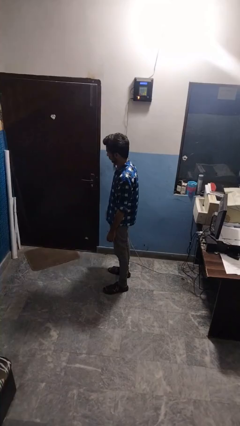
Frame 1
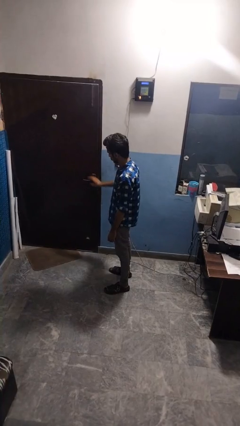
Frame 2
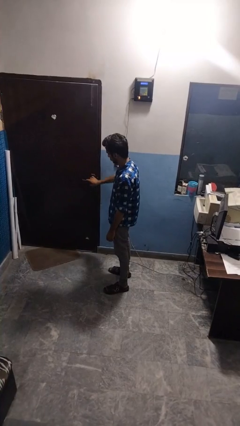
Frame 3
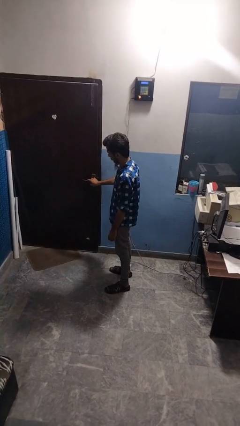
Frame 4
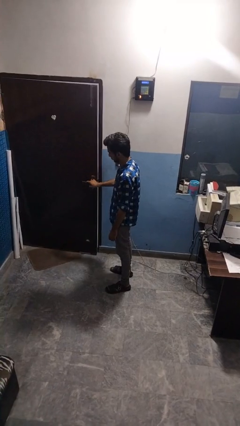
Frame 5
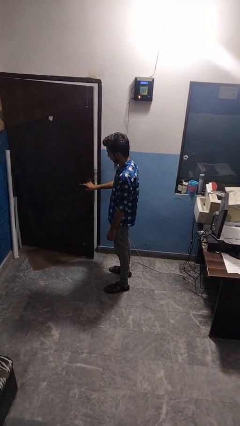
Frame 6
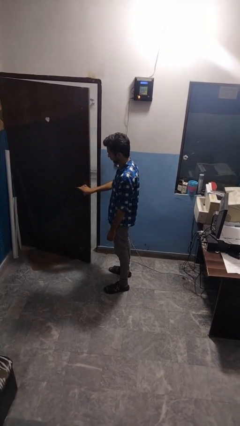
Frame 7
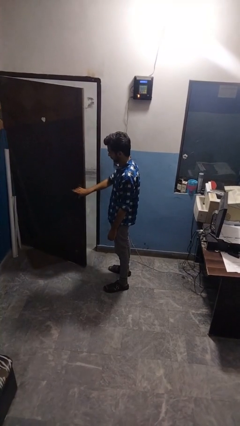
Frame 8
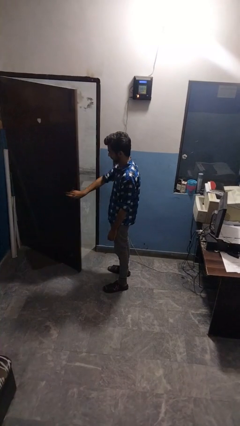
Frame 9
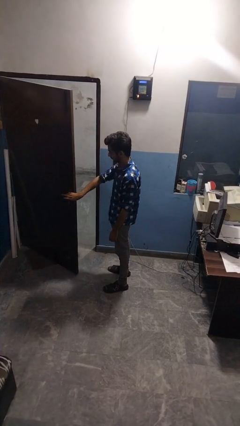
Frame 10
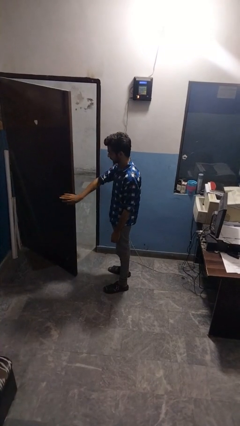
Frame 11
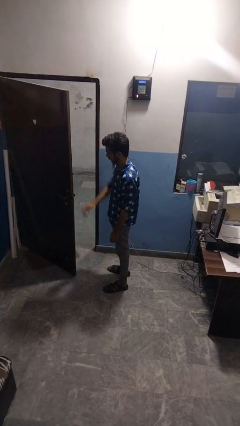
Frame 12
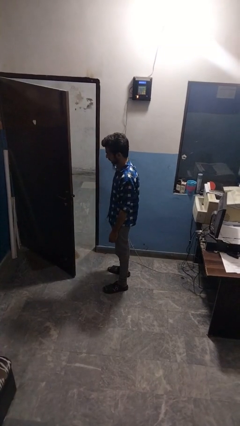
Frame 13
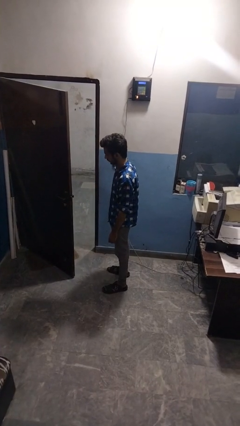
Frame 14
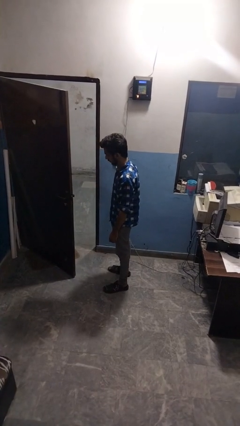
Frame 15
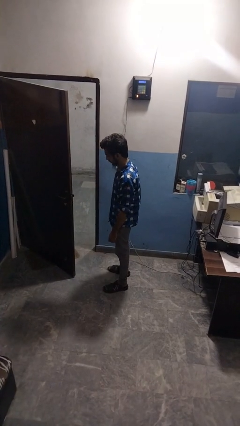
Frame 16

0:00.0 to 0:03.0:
person opens facility door

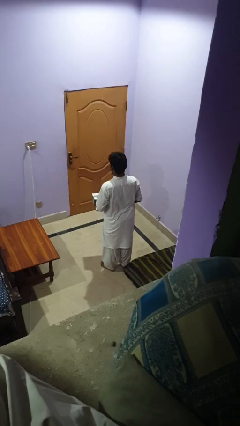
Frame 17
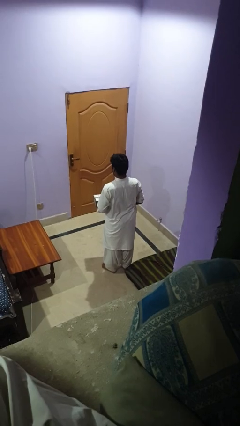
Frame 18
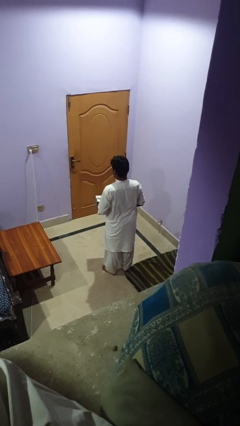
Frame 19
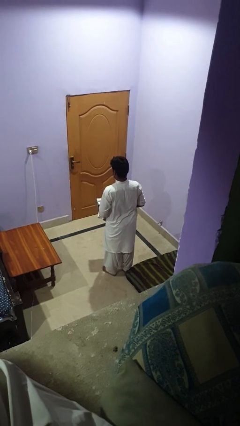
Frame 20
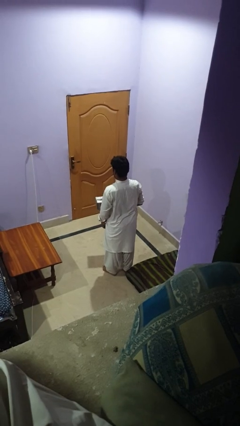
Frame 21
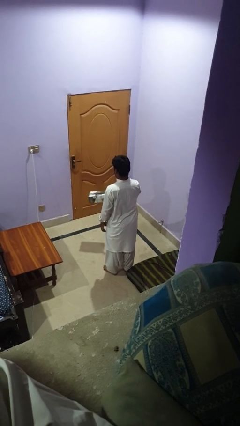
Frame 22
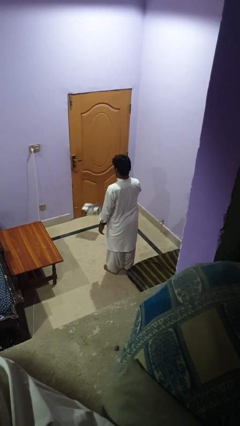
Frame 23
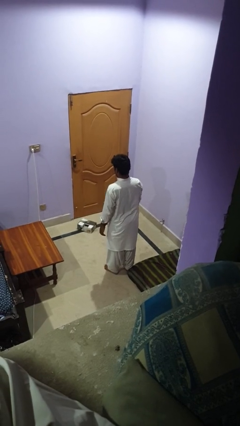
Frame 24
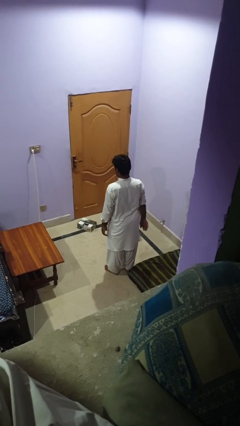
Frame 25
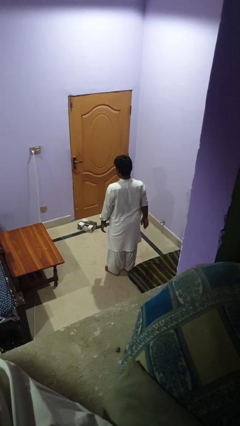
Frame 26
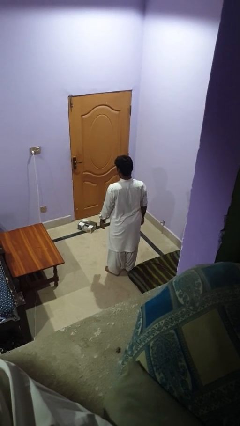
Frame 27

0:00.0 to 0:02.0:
person throws object to ground

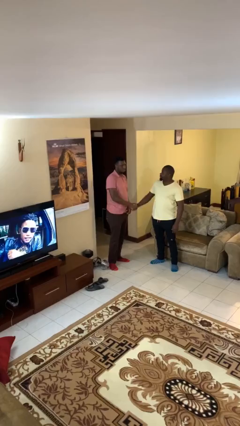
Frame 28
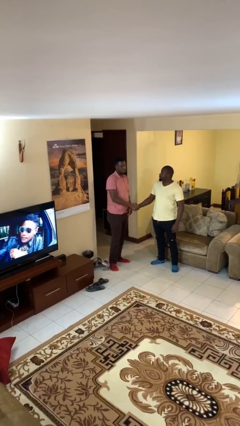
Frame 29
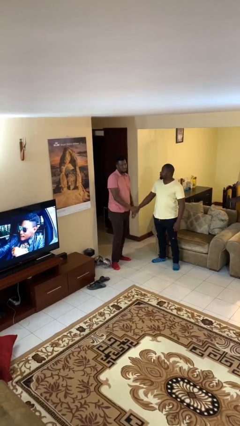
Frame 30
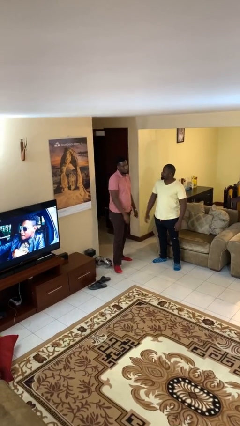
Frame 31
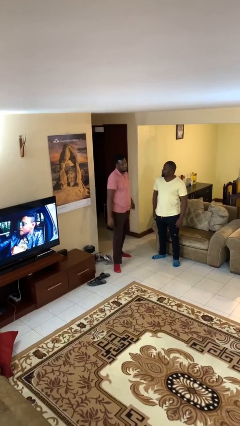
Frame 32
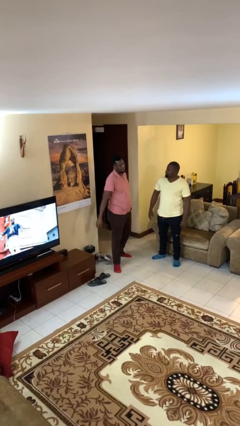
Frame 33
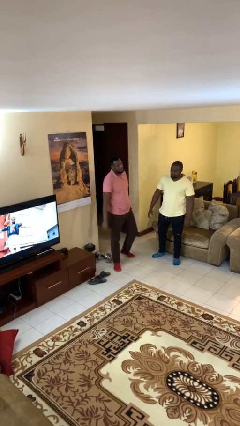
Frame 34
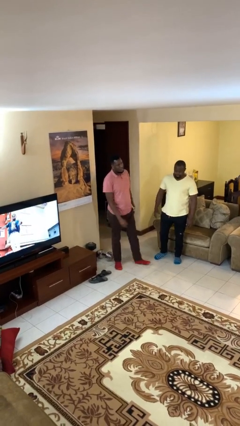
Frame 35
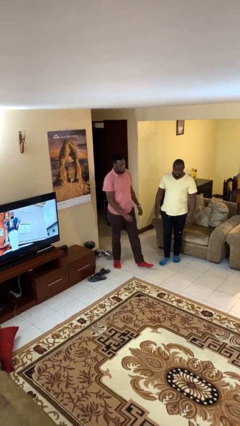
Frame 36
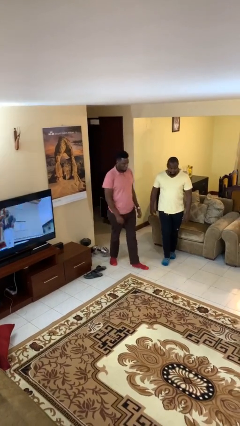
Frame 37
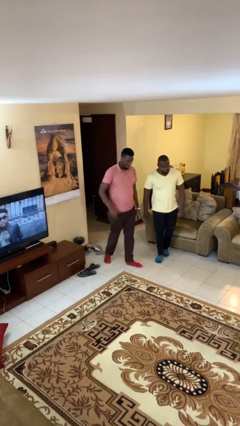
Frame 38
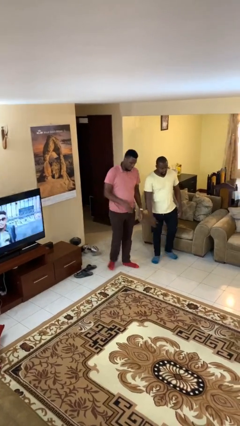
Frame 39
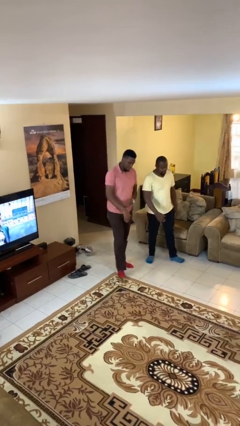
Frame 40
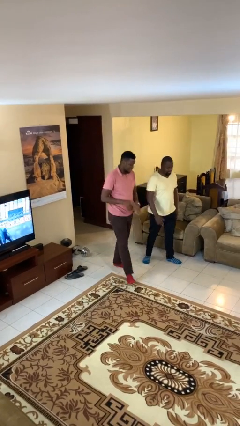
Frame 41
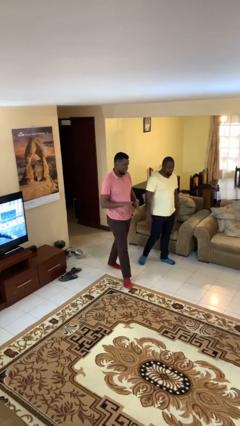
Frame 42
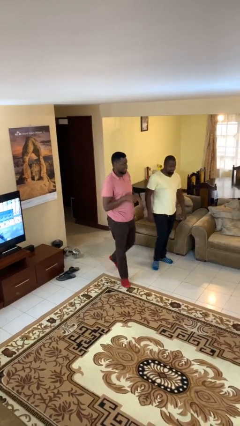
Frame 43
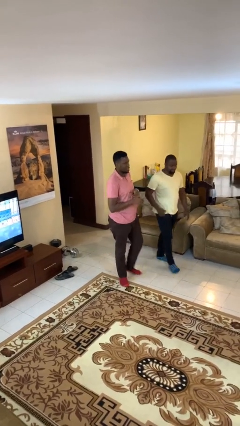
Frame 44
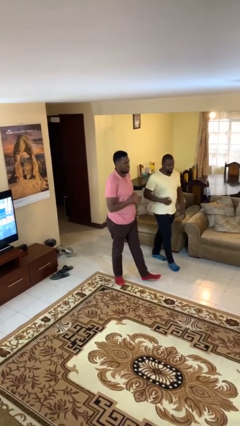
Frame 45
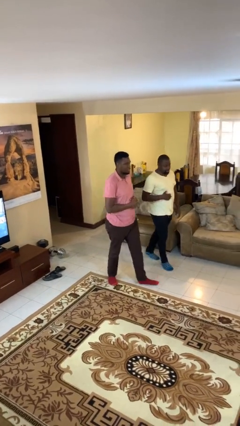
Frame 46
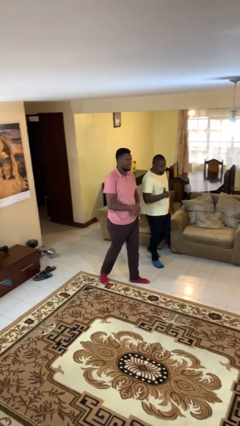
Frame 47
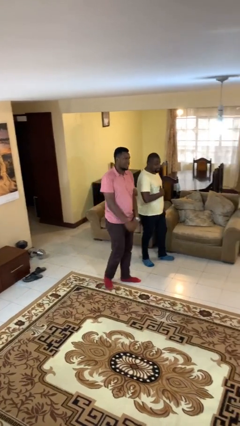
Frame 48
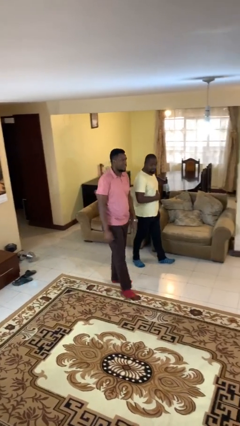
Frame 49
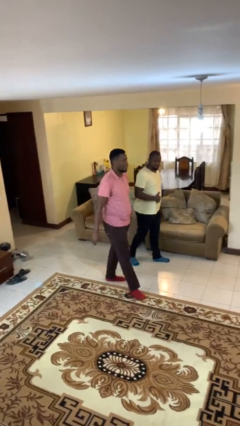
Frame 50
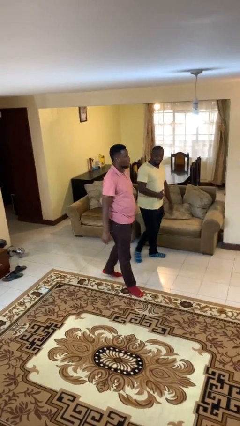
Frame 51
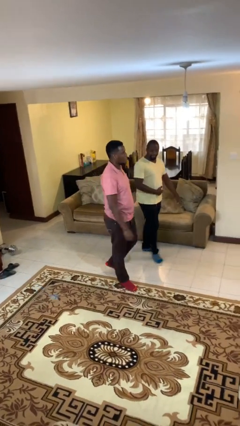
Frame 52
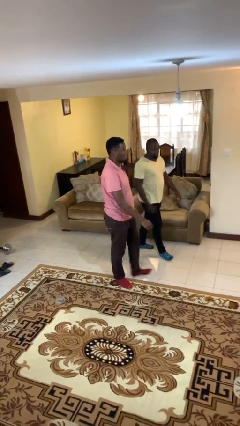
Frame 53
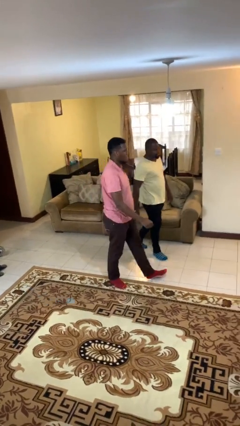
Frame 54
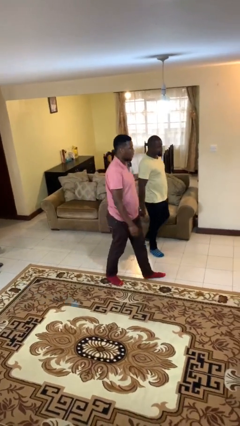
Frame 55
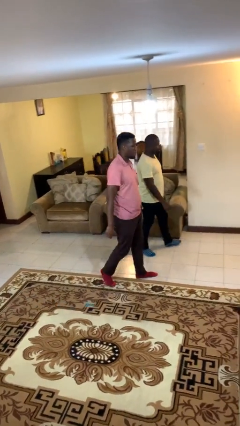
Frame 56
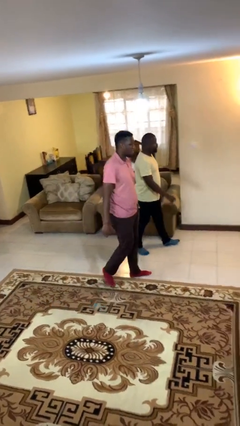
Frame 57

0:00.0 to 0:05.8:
person talks to person

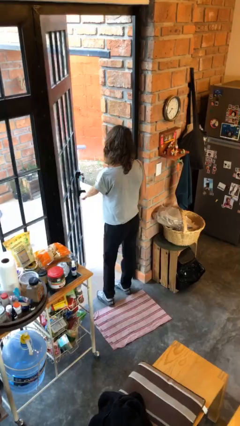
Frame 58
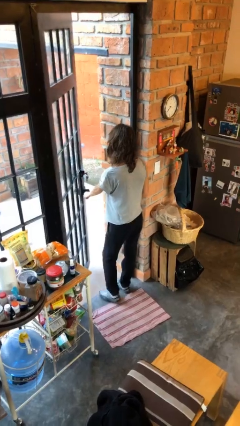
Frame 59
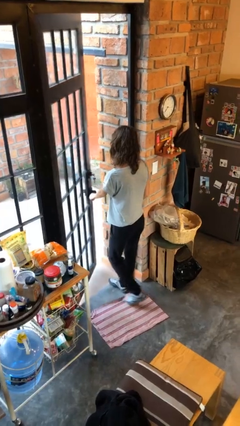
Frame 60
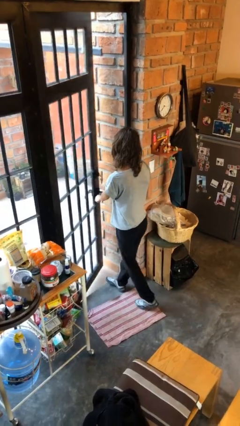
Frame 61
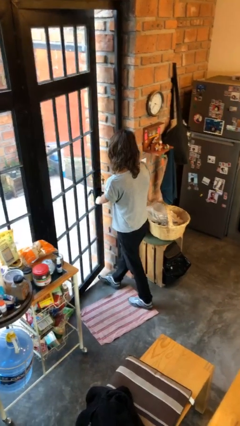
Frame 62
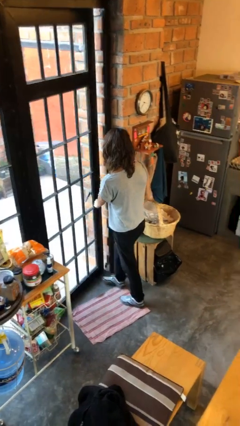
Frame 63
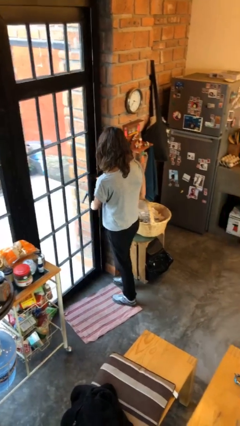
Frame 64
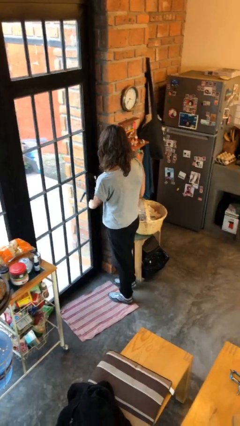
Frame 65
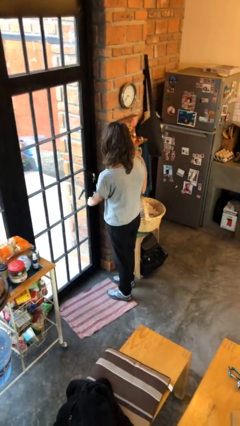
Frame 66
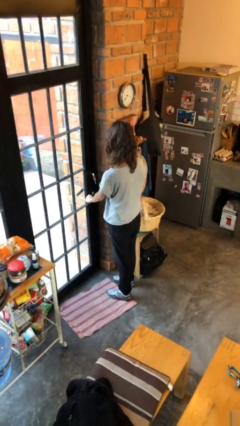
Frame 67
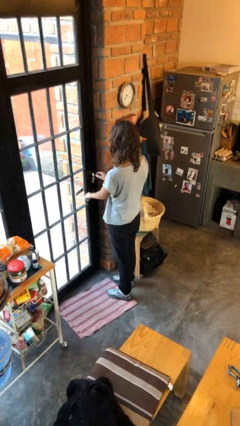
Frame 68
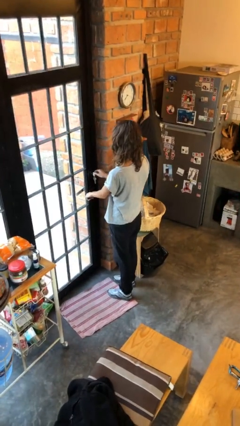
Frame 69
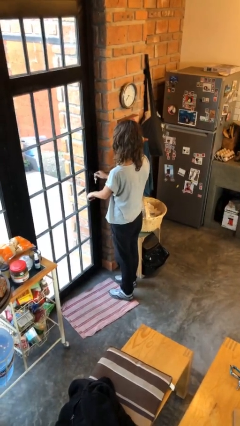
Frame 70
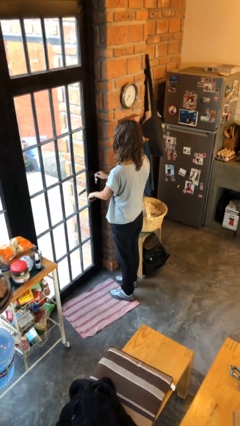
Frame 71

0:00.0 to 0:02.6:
person closes facility door

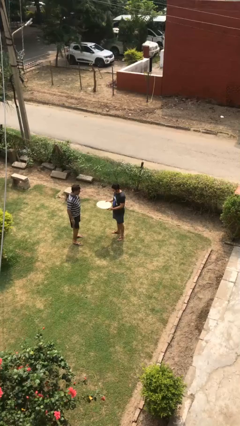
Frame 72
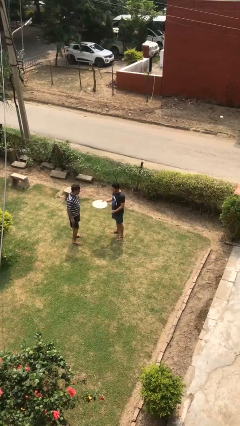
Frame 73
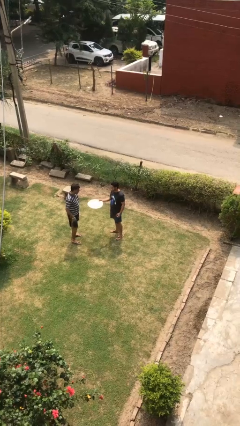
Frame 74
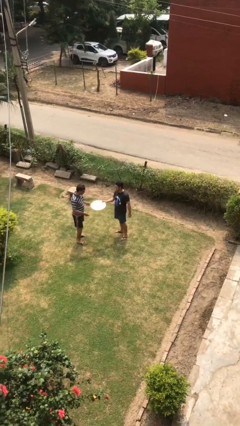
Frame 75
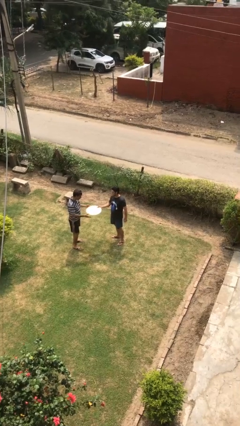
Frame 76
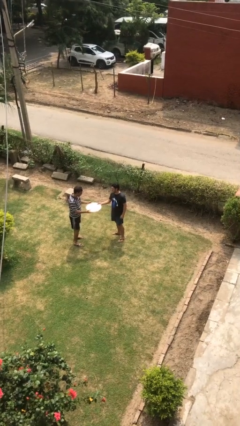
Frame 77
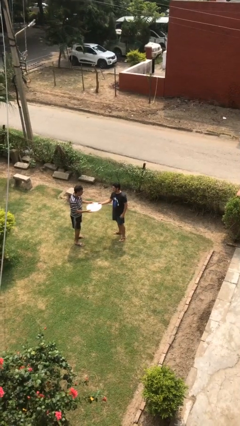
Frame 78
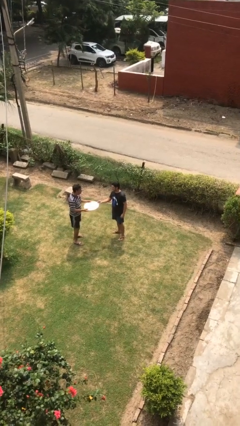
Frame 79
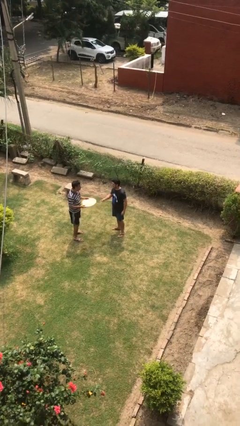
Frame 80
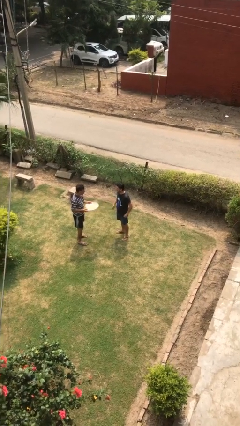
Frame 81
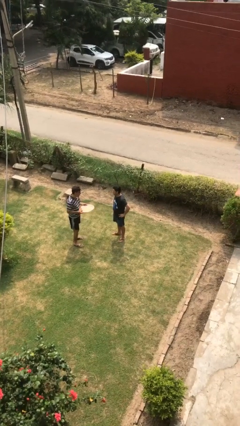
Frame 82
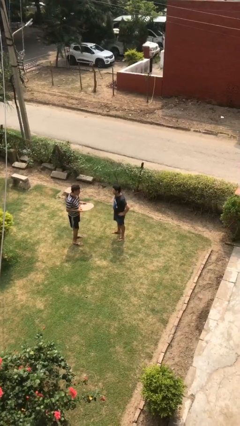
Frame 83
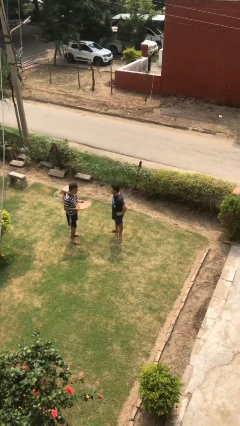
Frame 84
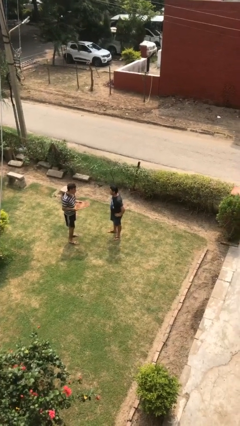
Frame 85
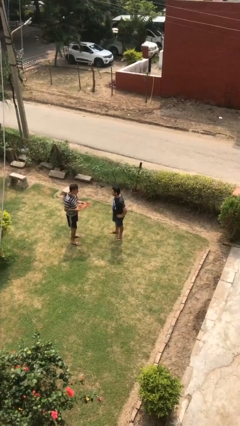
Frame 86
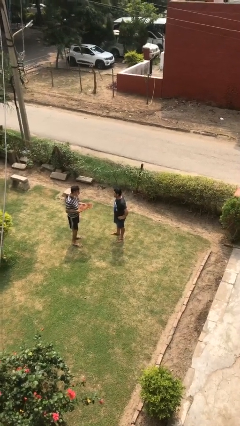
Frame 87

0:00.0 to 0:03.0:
person transfers object to person

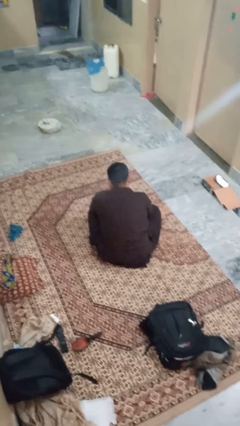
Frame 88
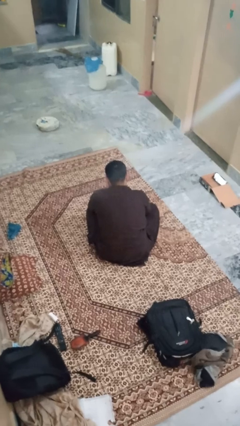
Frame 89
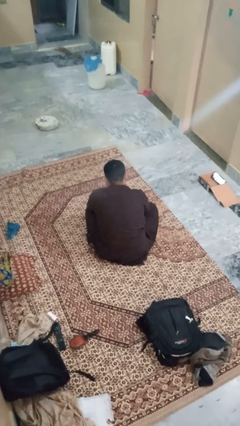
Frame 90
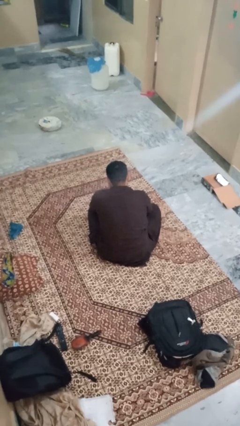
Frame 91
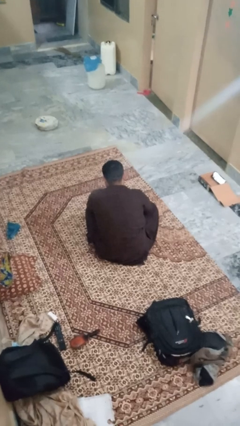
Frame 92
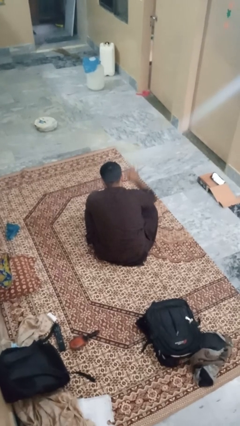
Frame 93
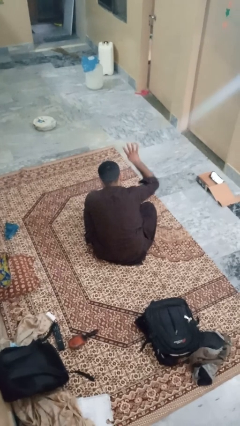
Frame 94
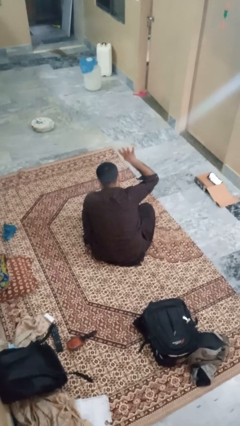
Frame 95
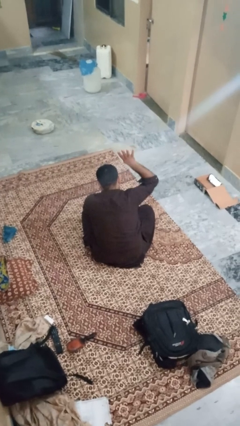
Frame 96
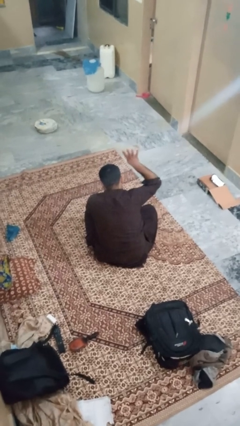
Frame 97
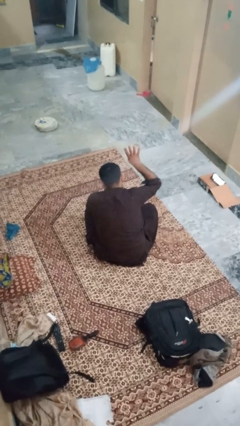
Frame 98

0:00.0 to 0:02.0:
person gestures number four
